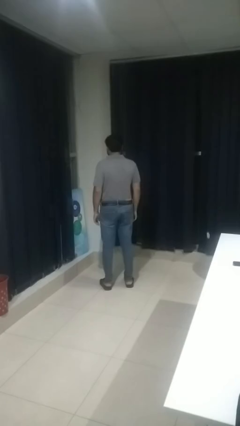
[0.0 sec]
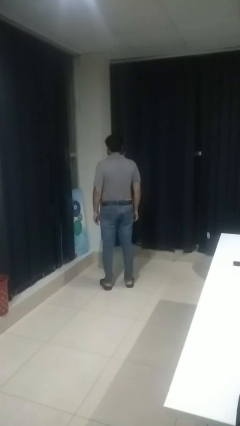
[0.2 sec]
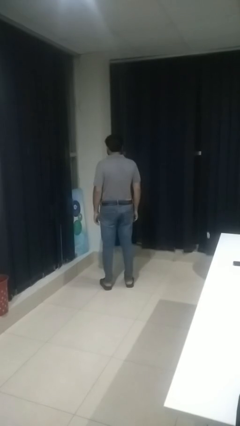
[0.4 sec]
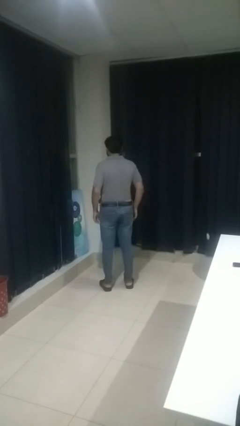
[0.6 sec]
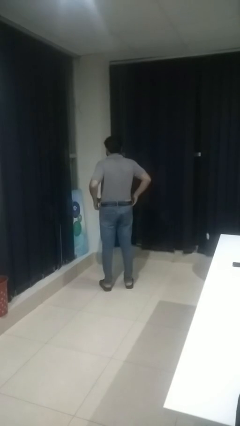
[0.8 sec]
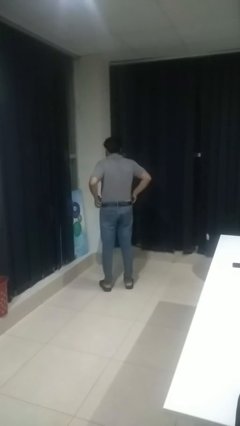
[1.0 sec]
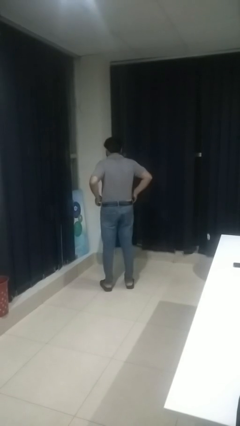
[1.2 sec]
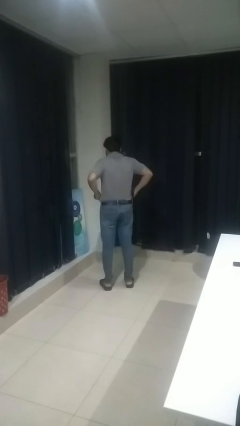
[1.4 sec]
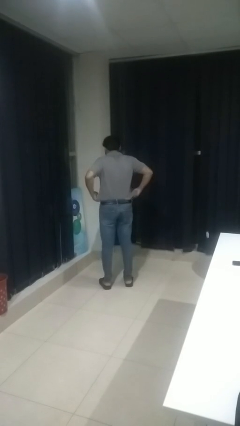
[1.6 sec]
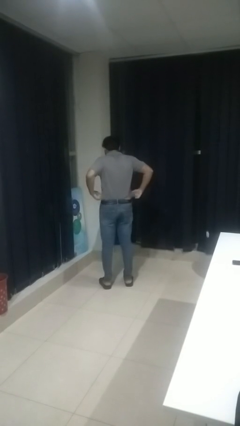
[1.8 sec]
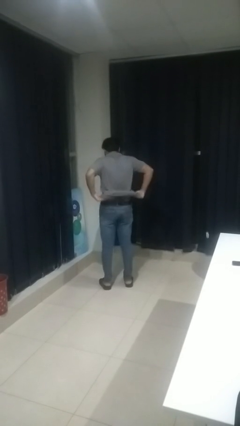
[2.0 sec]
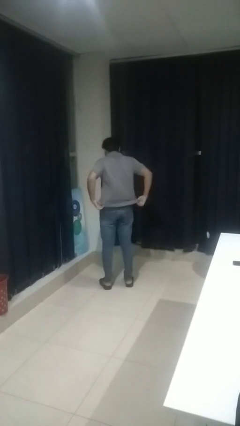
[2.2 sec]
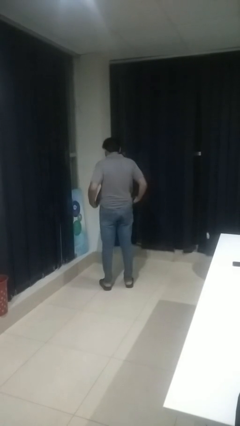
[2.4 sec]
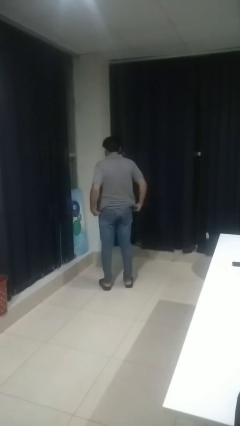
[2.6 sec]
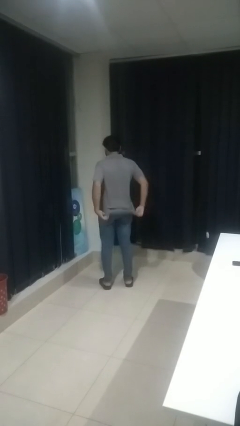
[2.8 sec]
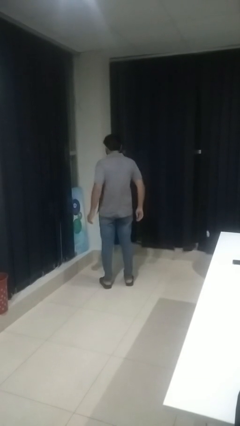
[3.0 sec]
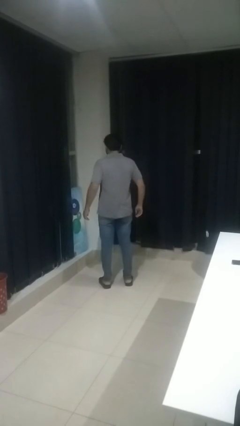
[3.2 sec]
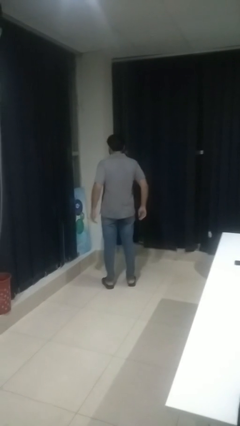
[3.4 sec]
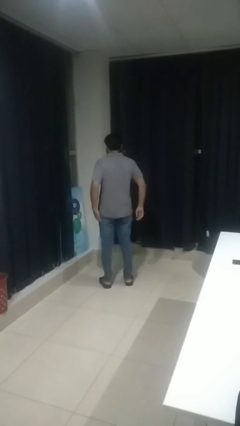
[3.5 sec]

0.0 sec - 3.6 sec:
person untucks shirt

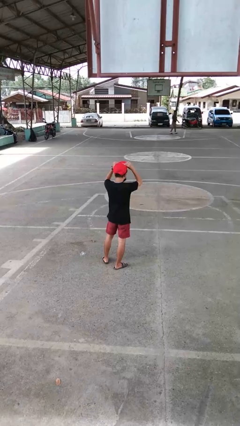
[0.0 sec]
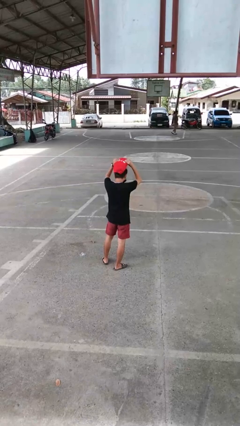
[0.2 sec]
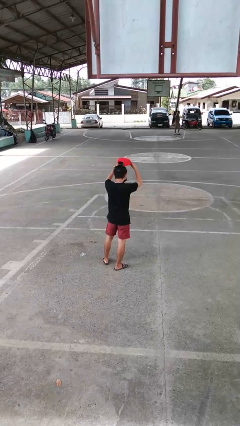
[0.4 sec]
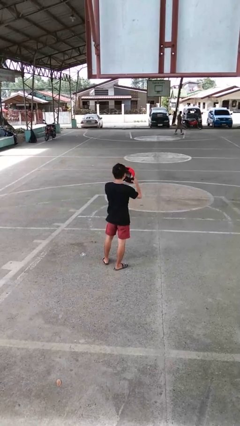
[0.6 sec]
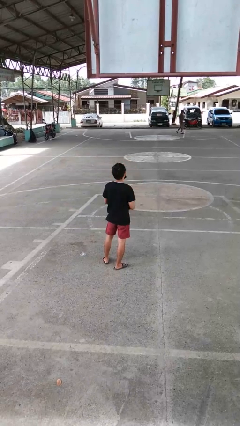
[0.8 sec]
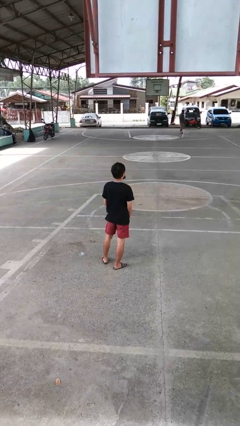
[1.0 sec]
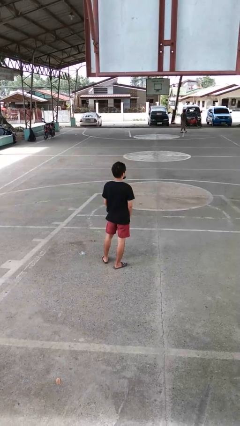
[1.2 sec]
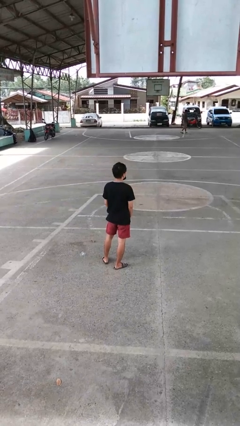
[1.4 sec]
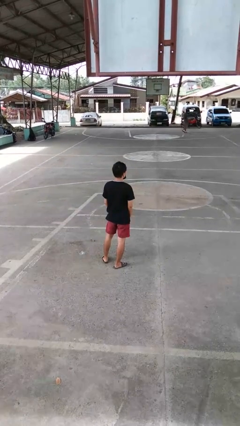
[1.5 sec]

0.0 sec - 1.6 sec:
person takes off hat

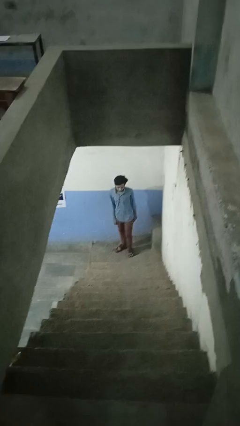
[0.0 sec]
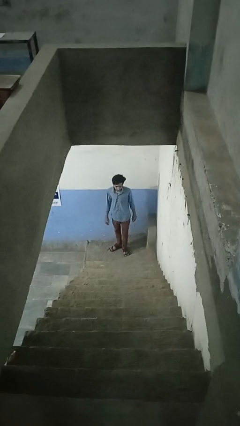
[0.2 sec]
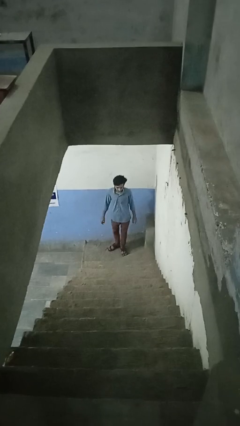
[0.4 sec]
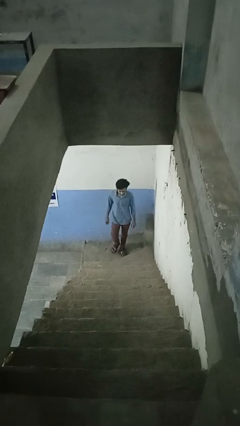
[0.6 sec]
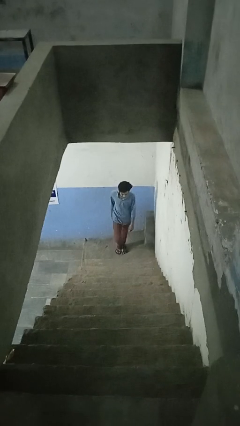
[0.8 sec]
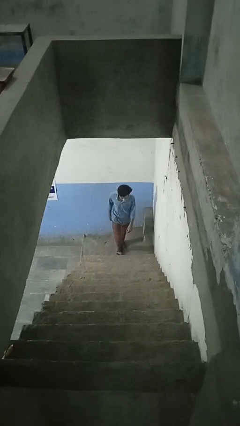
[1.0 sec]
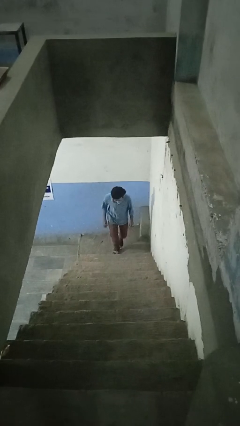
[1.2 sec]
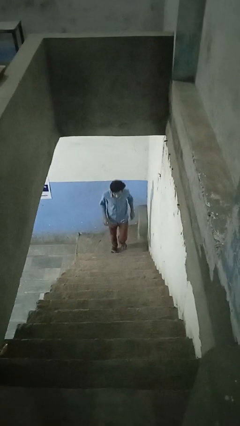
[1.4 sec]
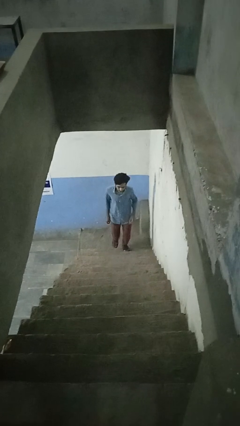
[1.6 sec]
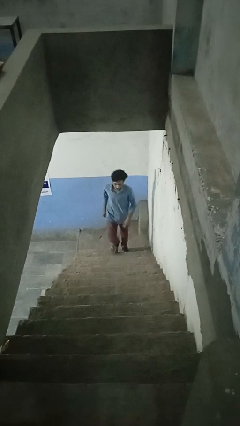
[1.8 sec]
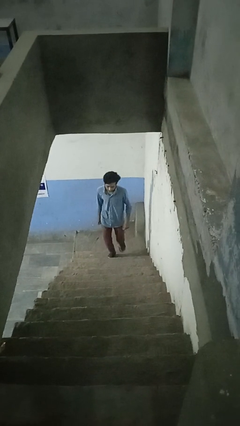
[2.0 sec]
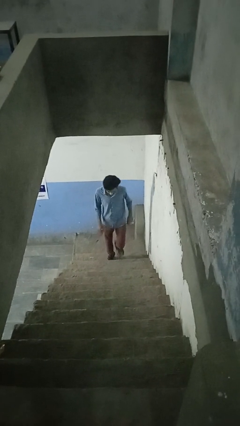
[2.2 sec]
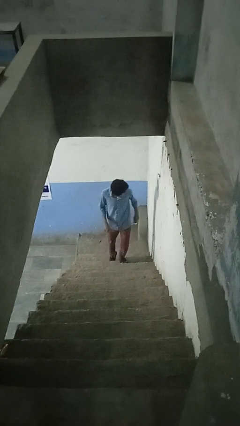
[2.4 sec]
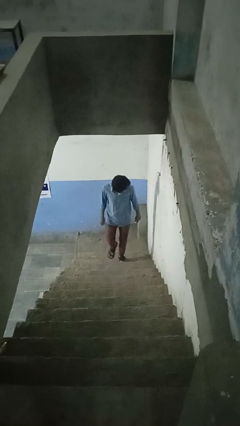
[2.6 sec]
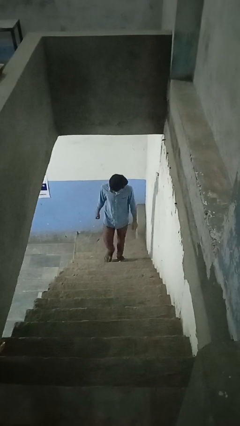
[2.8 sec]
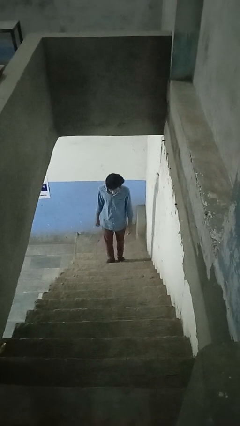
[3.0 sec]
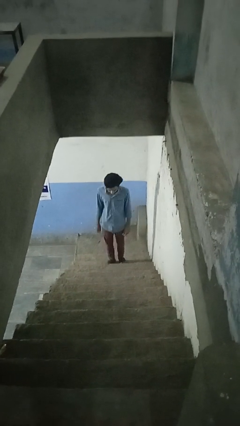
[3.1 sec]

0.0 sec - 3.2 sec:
person climbs up stairs

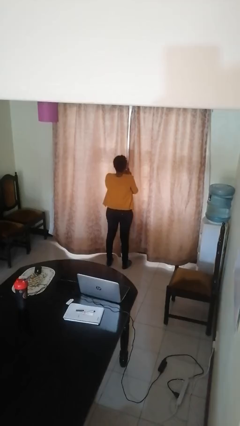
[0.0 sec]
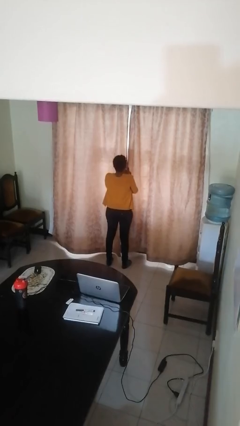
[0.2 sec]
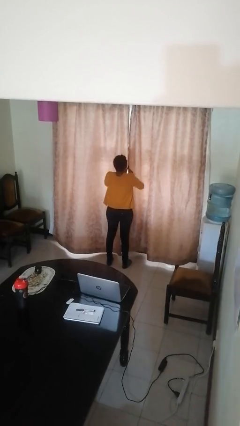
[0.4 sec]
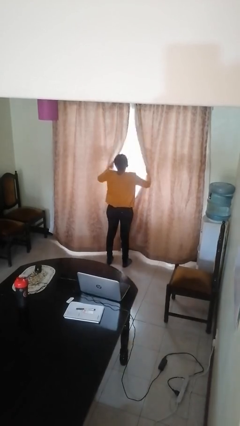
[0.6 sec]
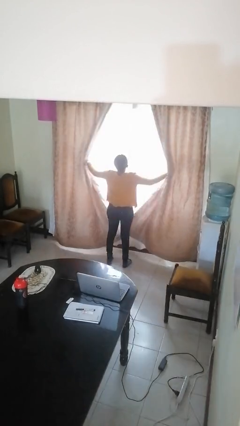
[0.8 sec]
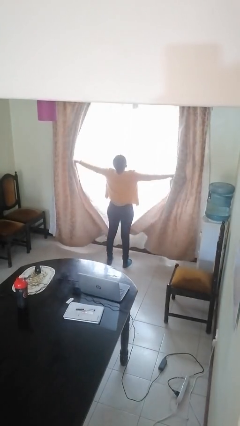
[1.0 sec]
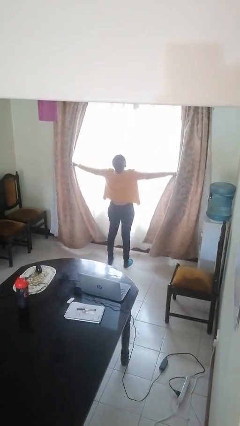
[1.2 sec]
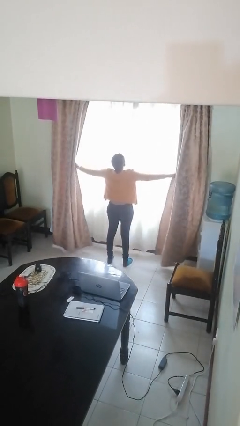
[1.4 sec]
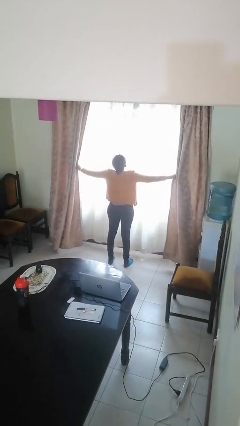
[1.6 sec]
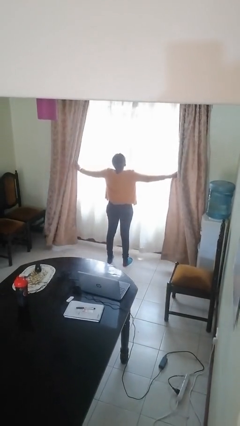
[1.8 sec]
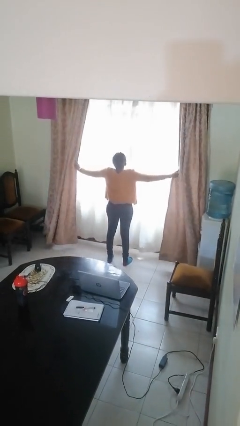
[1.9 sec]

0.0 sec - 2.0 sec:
person opens curtains

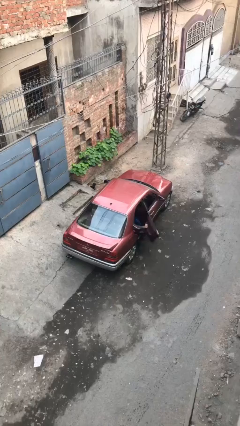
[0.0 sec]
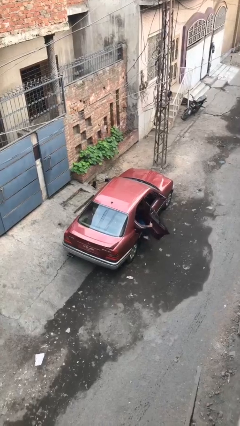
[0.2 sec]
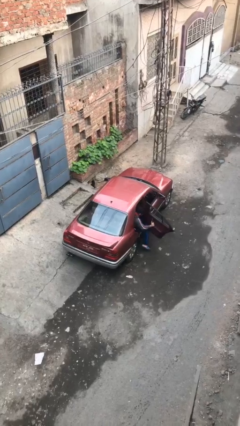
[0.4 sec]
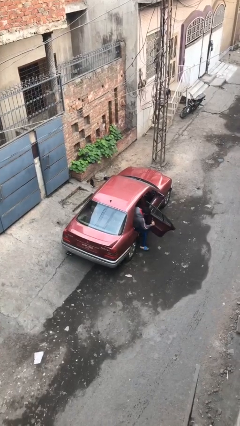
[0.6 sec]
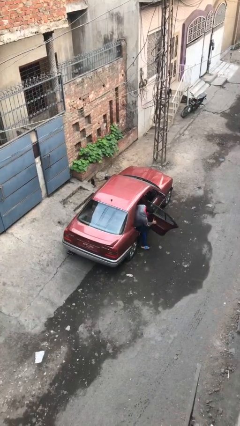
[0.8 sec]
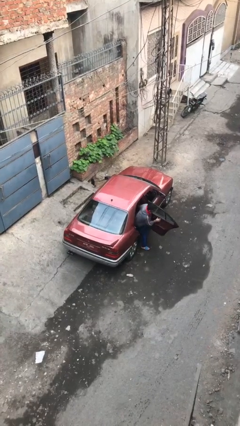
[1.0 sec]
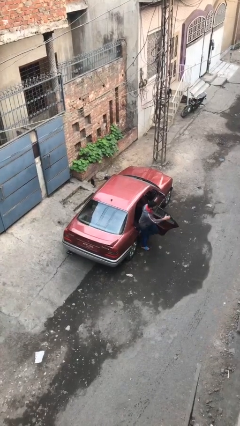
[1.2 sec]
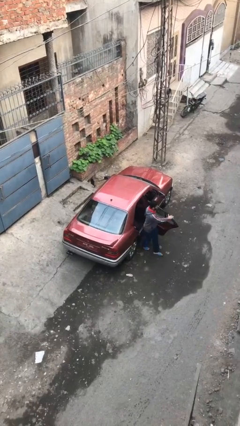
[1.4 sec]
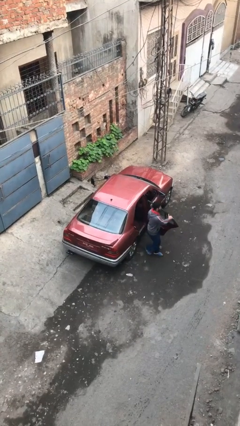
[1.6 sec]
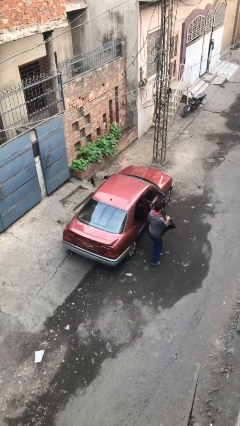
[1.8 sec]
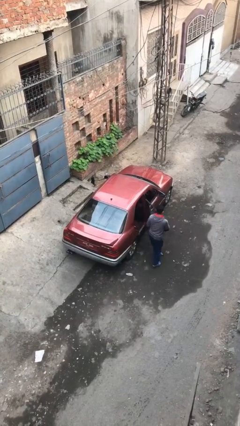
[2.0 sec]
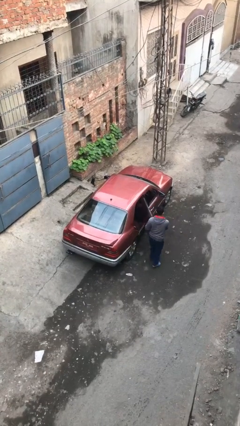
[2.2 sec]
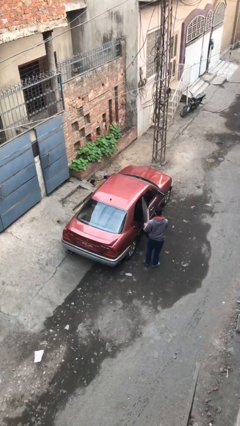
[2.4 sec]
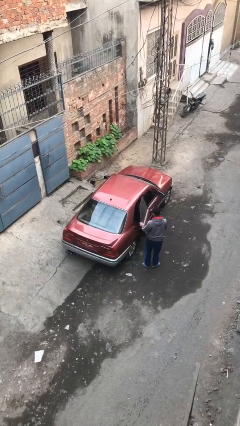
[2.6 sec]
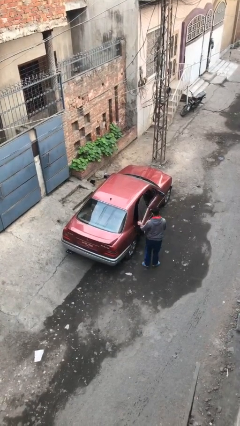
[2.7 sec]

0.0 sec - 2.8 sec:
car drops off person

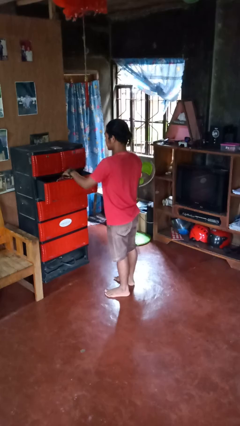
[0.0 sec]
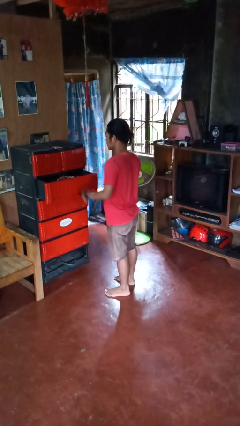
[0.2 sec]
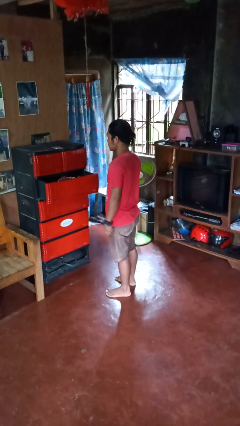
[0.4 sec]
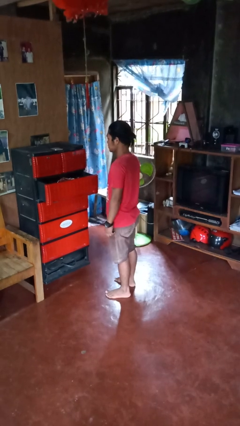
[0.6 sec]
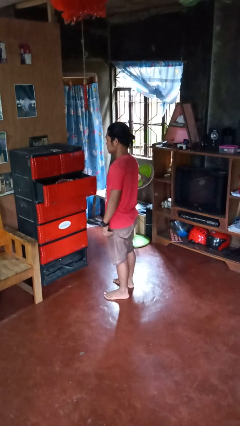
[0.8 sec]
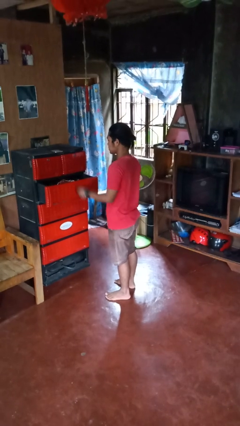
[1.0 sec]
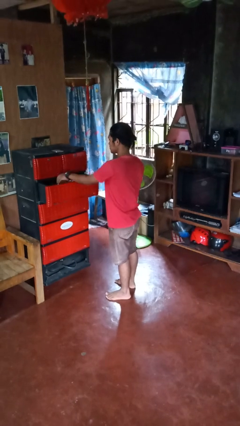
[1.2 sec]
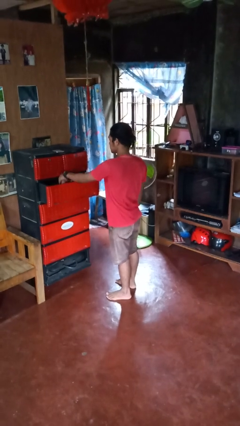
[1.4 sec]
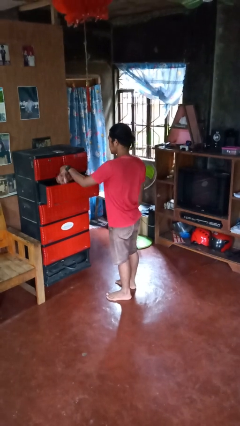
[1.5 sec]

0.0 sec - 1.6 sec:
person puts clothes into dresser

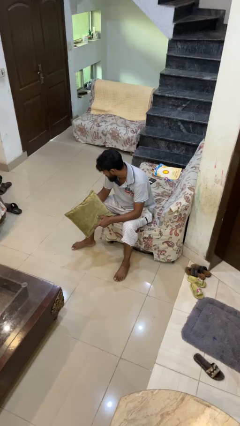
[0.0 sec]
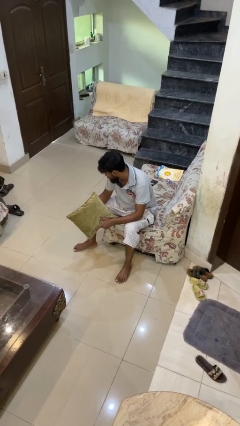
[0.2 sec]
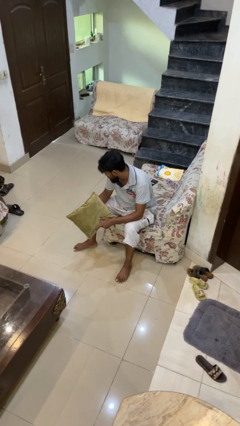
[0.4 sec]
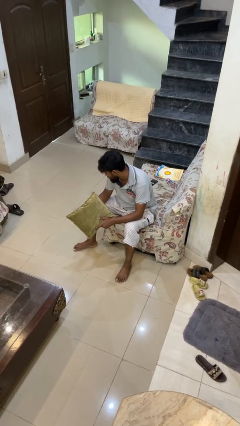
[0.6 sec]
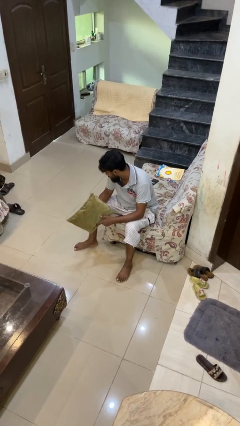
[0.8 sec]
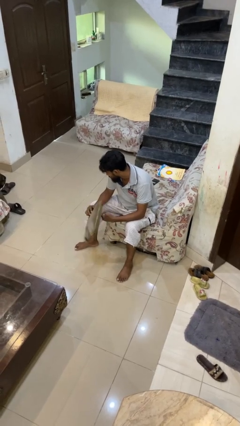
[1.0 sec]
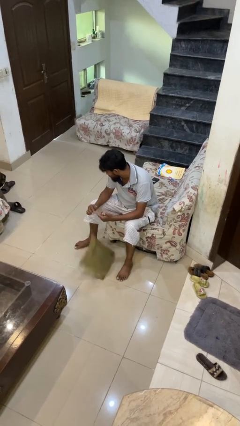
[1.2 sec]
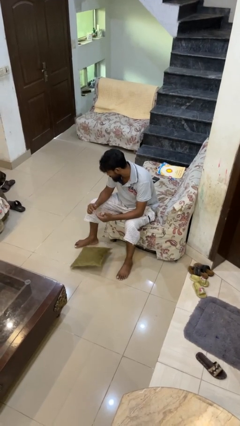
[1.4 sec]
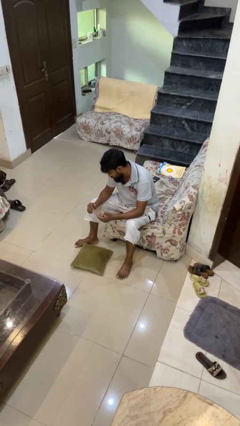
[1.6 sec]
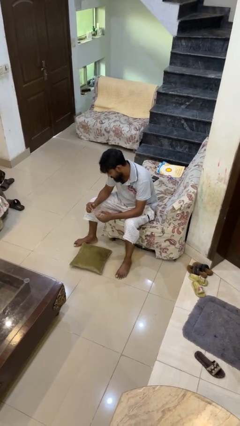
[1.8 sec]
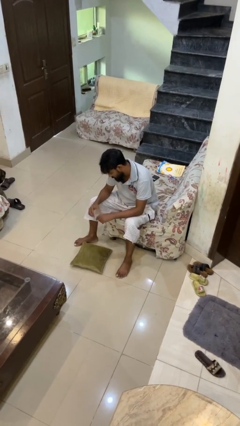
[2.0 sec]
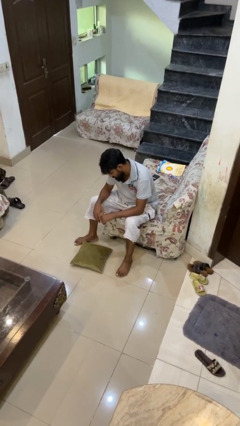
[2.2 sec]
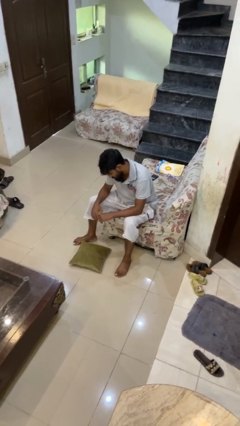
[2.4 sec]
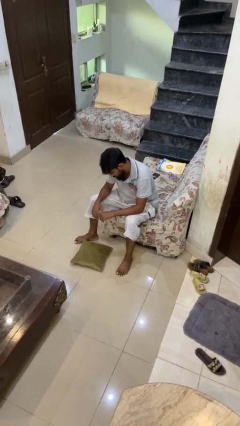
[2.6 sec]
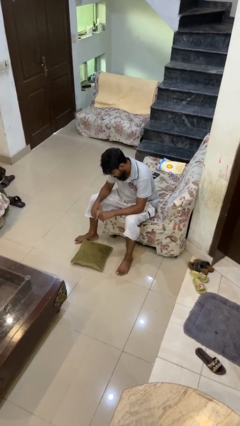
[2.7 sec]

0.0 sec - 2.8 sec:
person drops object
